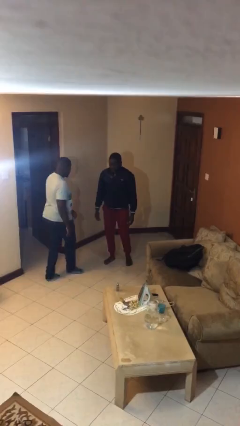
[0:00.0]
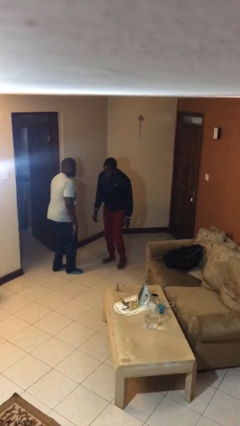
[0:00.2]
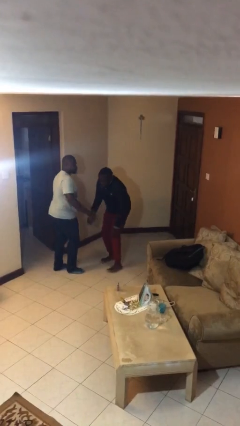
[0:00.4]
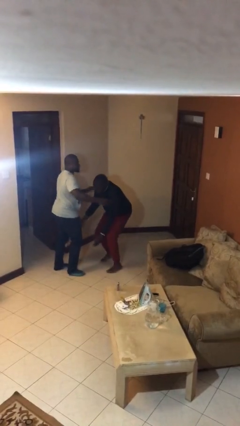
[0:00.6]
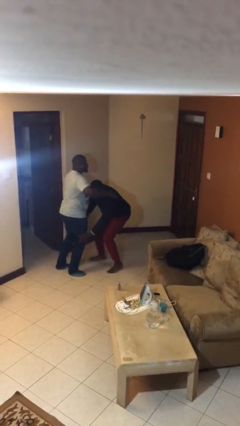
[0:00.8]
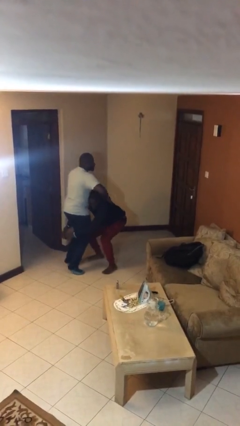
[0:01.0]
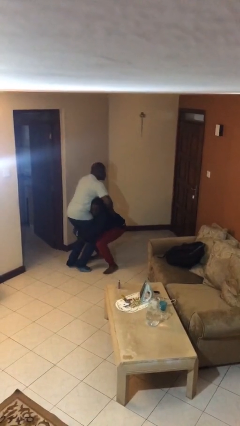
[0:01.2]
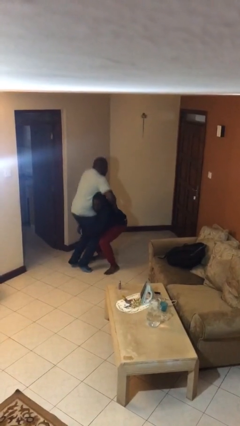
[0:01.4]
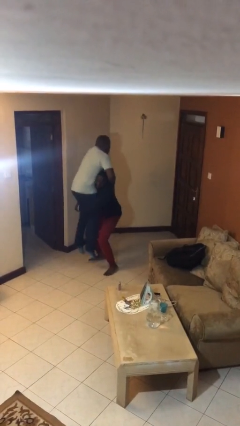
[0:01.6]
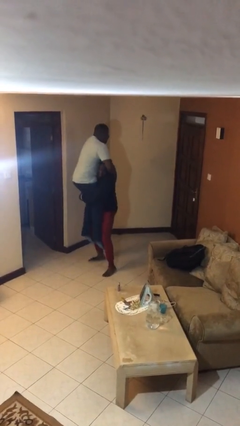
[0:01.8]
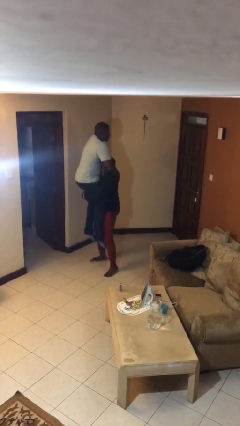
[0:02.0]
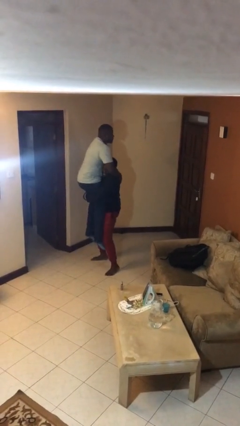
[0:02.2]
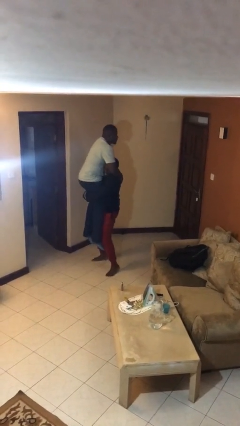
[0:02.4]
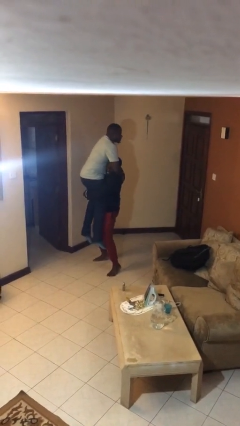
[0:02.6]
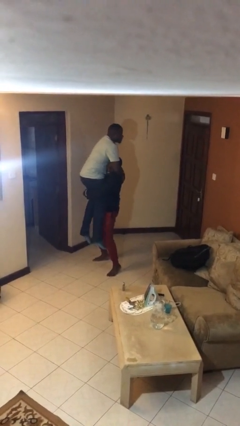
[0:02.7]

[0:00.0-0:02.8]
person picks up person

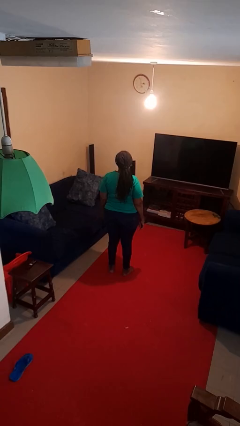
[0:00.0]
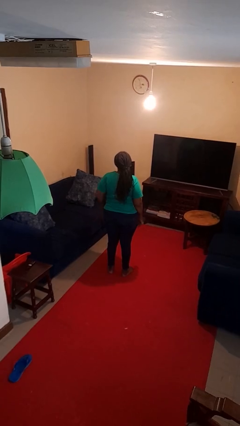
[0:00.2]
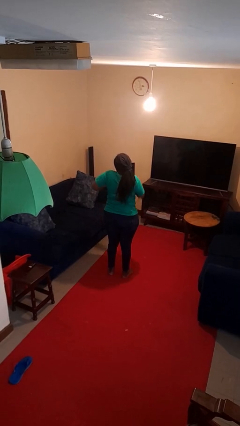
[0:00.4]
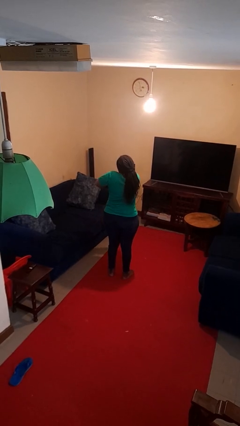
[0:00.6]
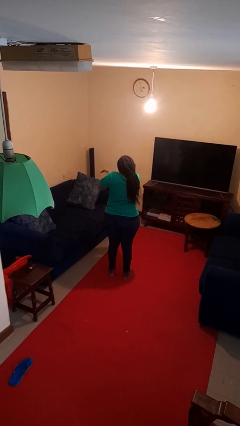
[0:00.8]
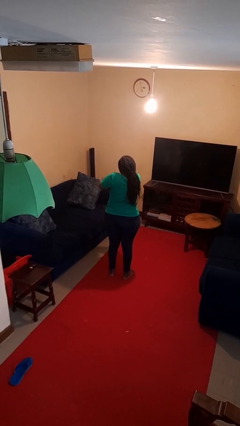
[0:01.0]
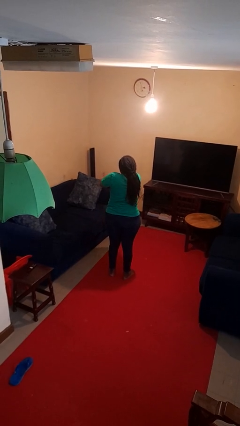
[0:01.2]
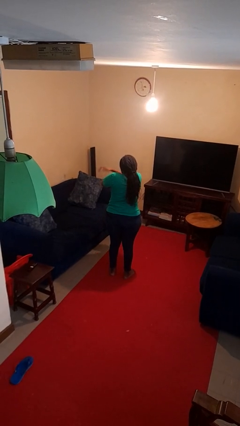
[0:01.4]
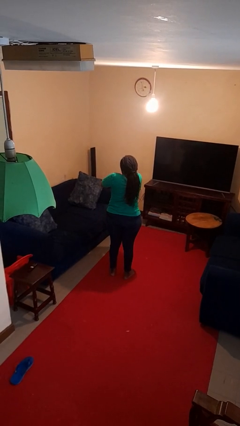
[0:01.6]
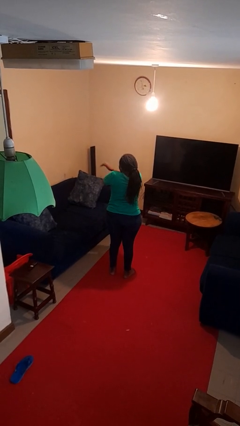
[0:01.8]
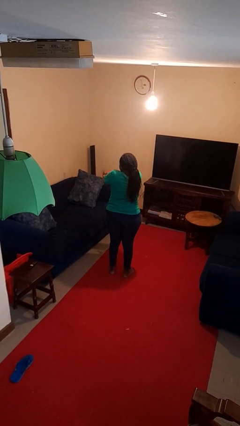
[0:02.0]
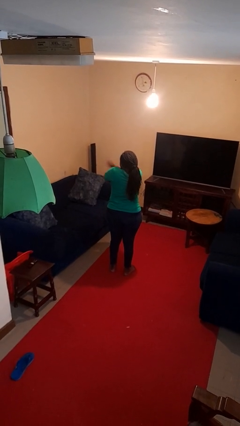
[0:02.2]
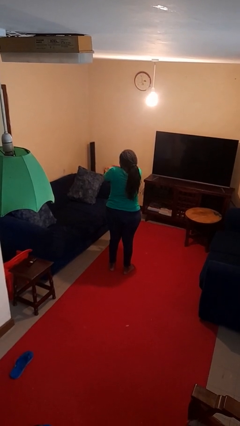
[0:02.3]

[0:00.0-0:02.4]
person swats bug

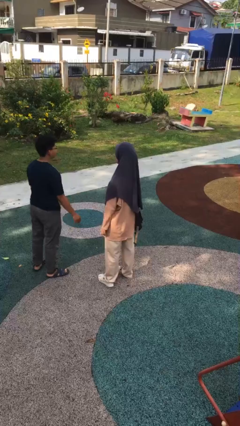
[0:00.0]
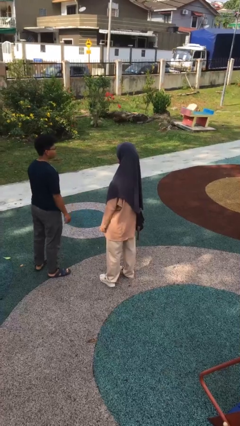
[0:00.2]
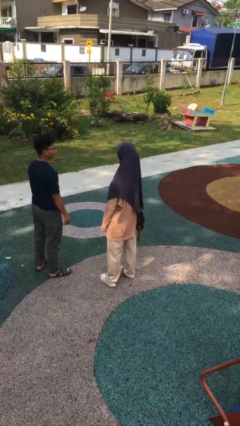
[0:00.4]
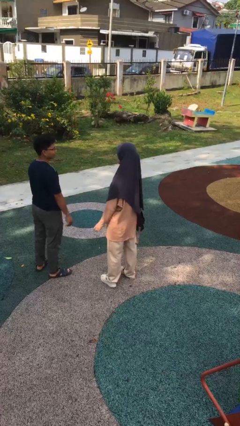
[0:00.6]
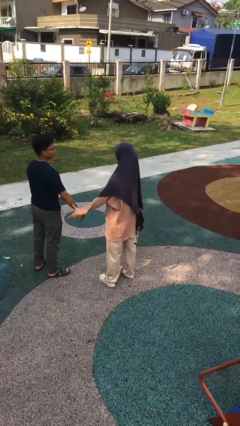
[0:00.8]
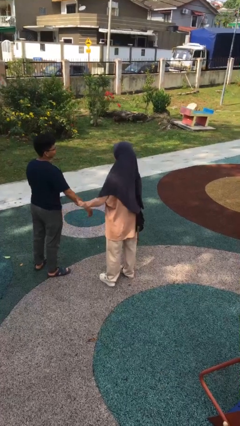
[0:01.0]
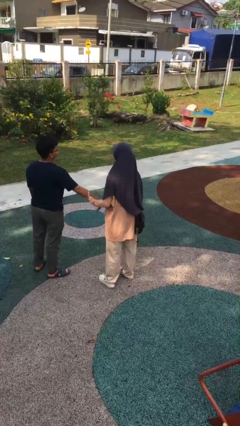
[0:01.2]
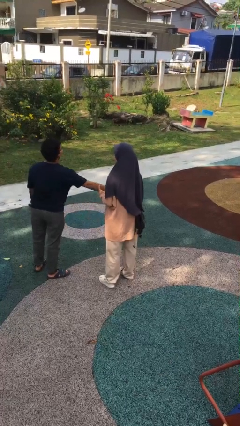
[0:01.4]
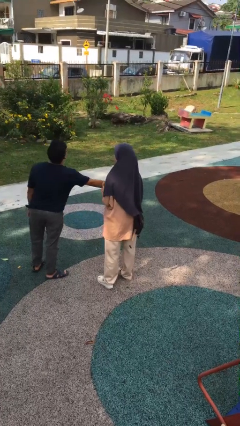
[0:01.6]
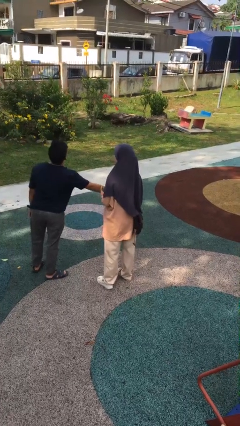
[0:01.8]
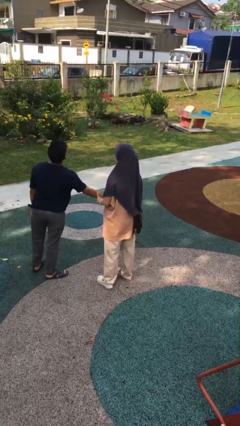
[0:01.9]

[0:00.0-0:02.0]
person grabs person by forearm

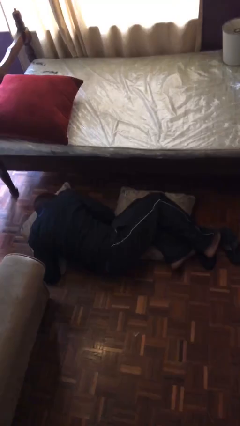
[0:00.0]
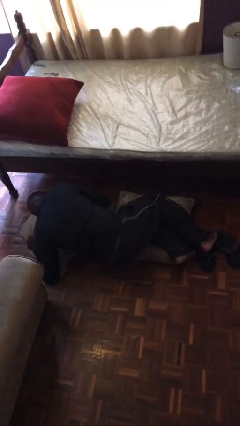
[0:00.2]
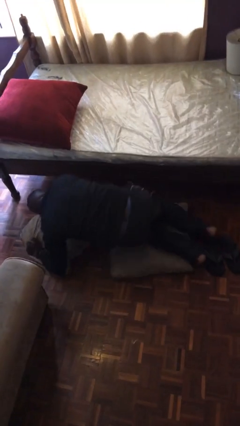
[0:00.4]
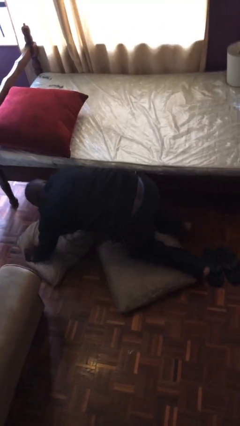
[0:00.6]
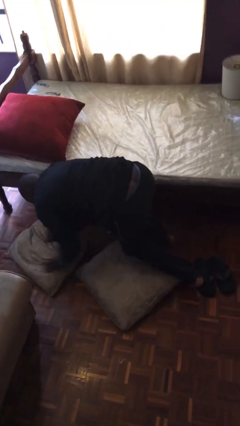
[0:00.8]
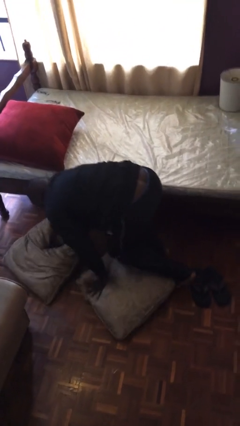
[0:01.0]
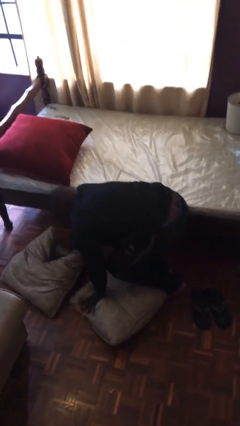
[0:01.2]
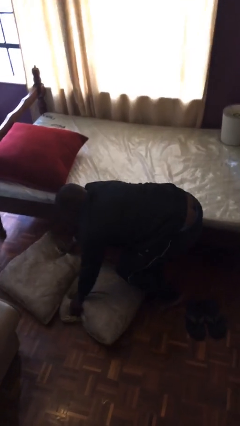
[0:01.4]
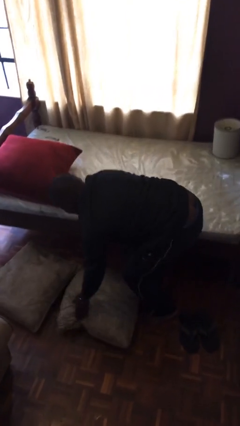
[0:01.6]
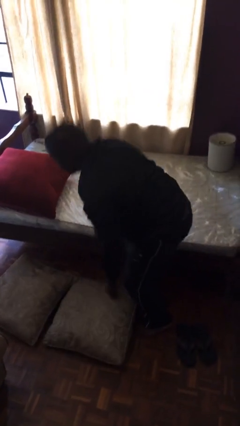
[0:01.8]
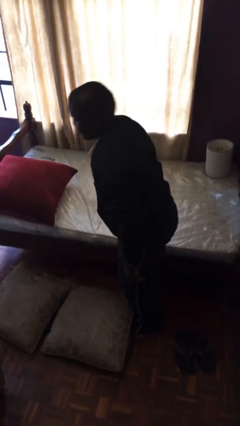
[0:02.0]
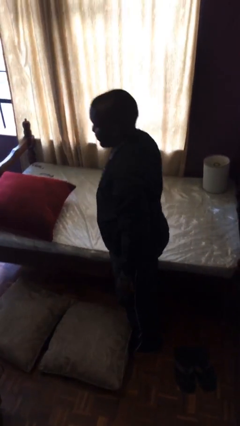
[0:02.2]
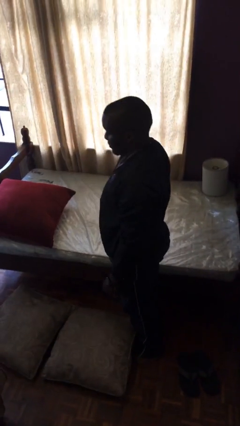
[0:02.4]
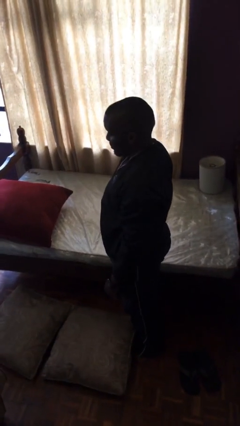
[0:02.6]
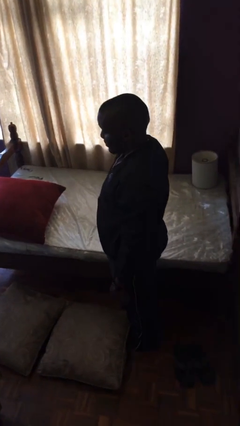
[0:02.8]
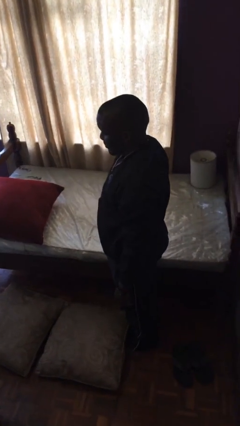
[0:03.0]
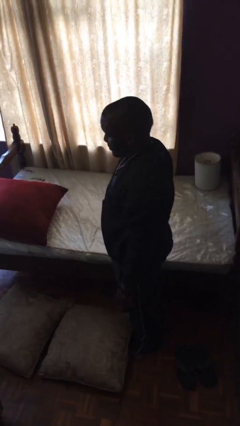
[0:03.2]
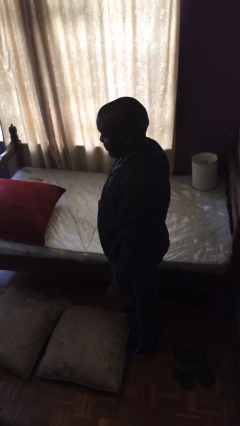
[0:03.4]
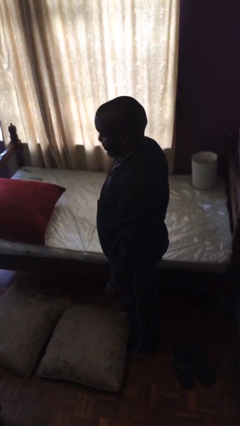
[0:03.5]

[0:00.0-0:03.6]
person stands up from floor

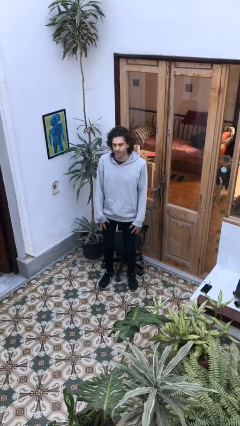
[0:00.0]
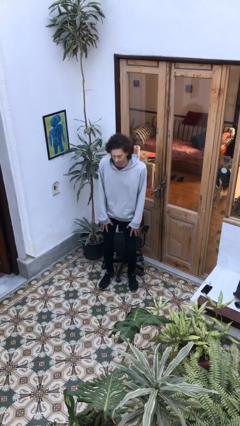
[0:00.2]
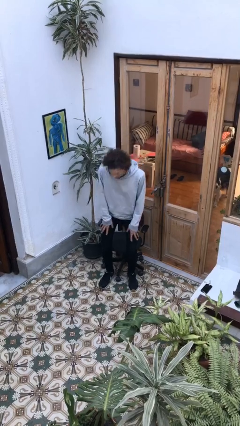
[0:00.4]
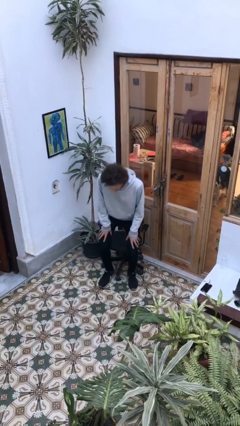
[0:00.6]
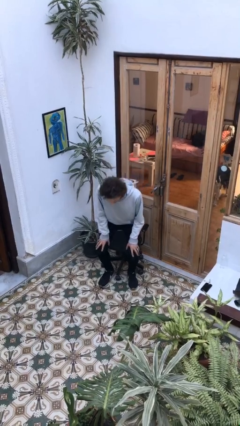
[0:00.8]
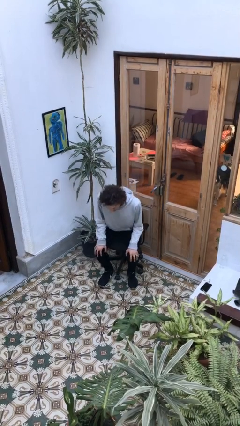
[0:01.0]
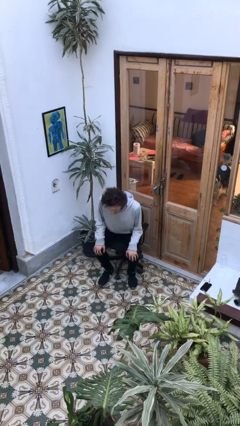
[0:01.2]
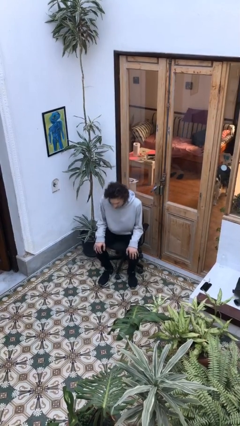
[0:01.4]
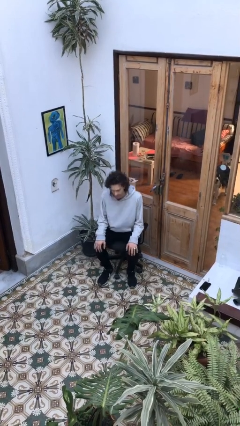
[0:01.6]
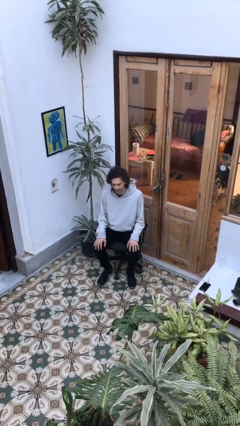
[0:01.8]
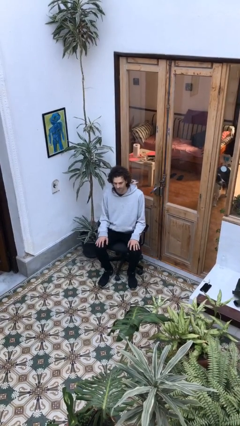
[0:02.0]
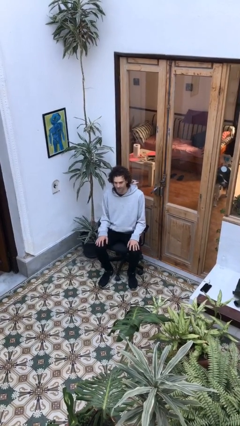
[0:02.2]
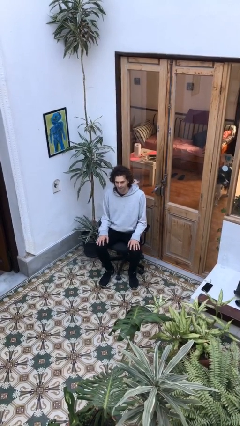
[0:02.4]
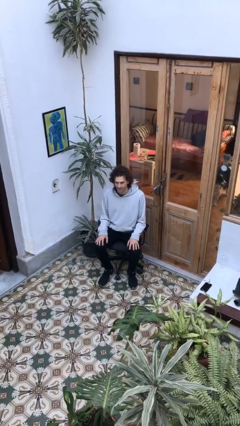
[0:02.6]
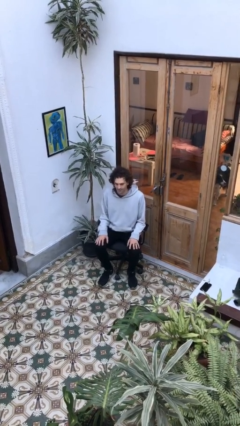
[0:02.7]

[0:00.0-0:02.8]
person sits down

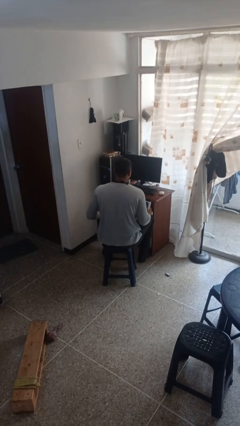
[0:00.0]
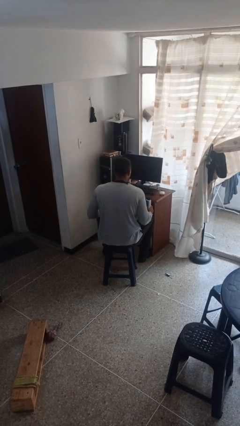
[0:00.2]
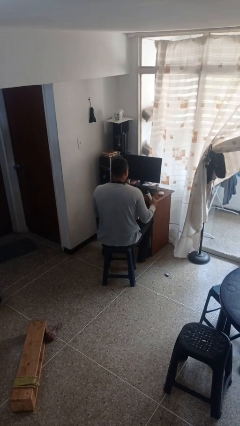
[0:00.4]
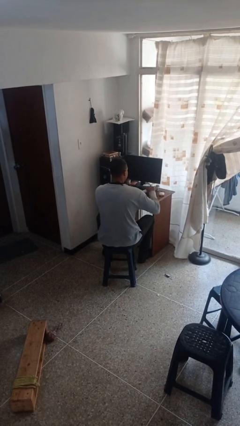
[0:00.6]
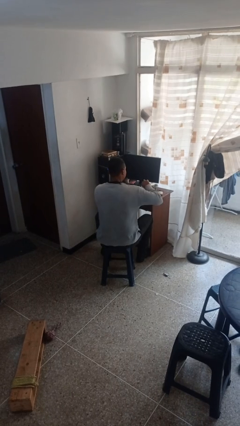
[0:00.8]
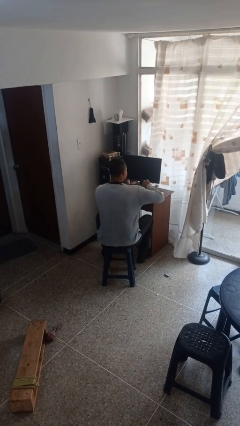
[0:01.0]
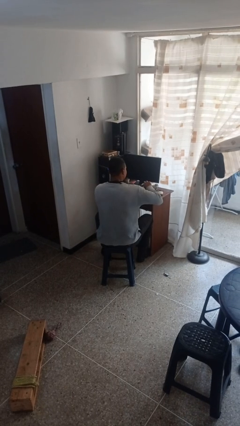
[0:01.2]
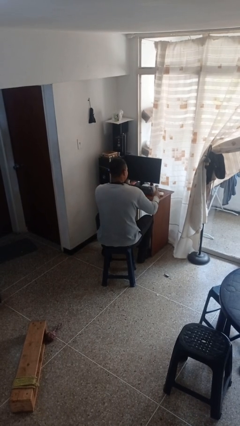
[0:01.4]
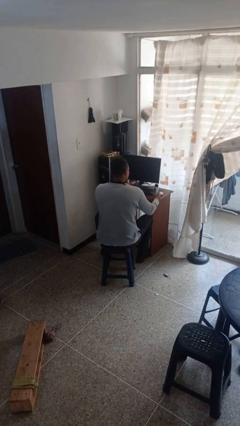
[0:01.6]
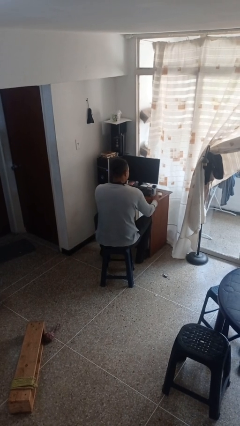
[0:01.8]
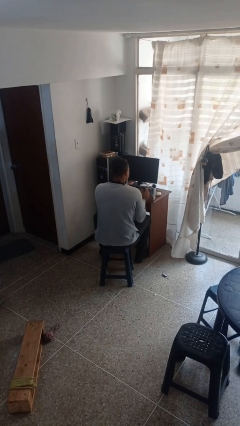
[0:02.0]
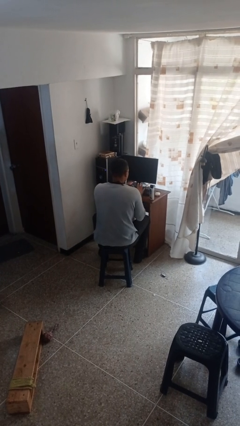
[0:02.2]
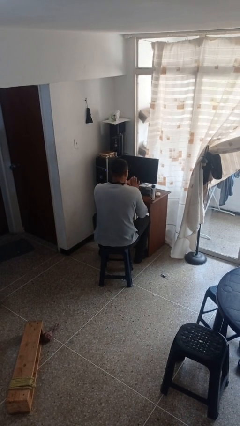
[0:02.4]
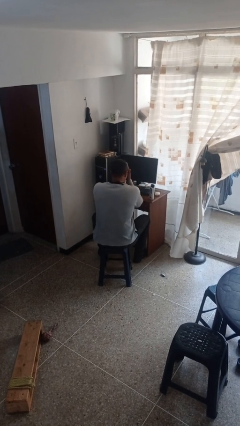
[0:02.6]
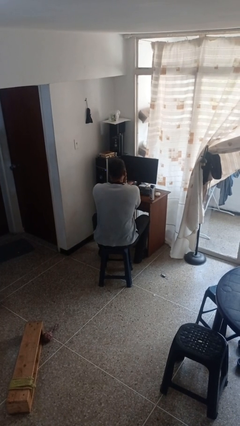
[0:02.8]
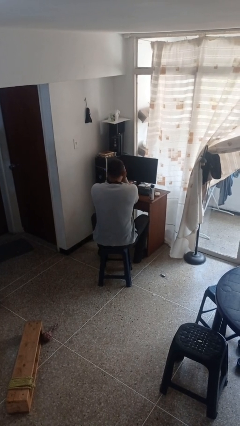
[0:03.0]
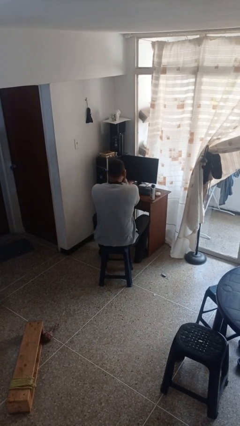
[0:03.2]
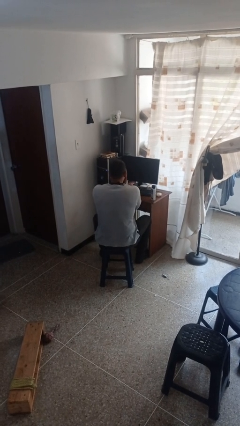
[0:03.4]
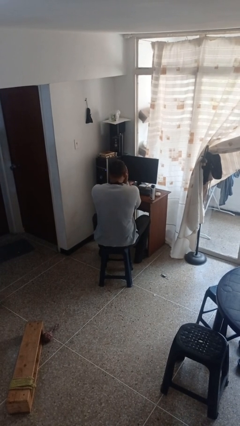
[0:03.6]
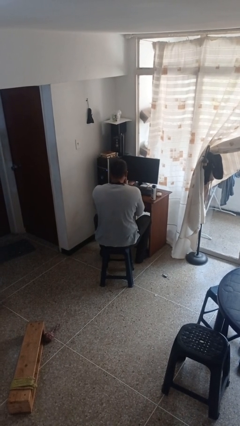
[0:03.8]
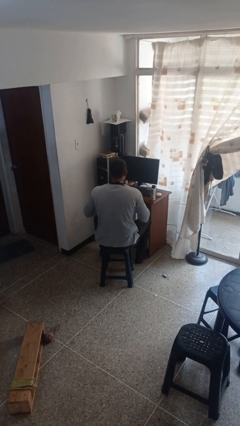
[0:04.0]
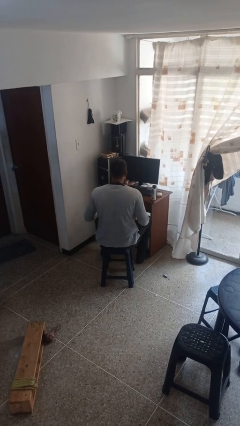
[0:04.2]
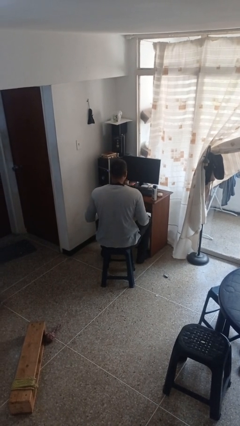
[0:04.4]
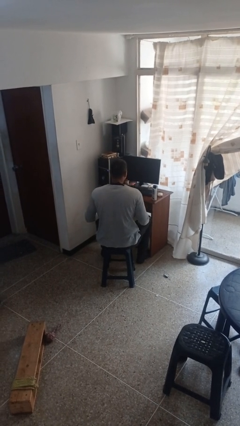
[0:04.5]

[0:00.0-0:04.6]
person applies facial moisturizer
